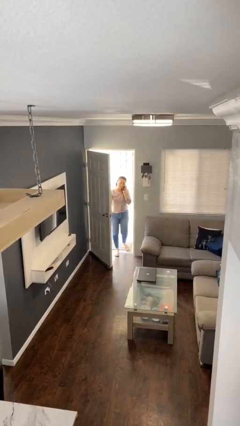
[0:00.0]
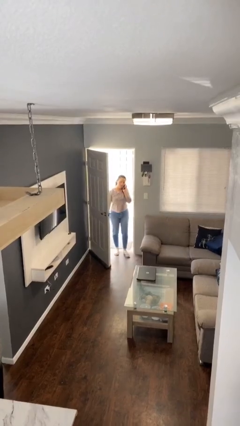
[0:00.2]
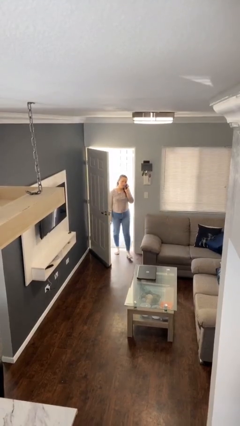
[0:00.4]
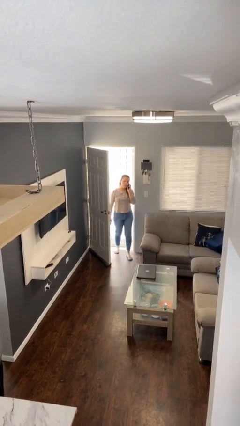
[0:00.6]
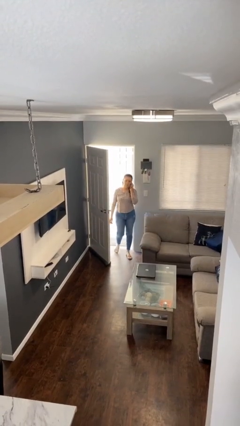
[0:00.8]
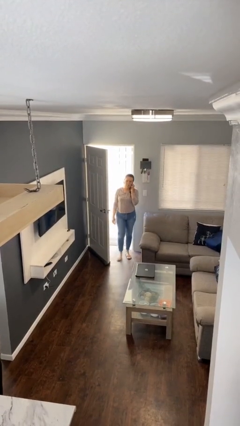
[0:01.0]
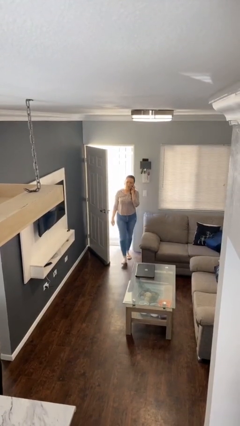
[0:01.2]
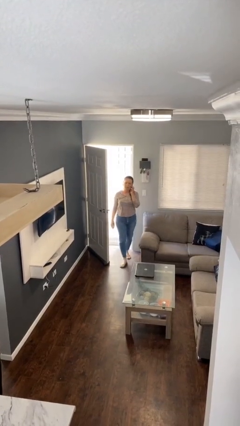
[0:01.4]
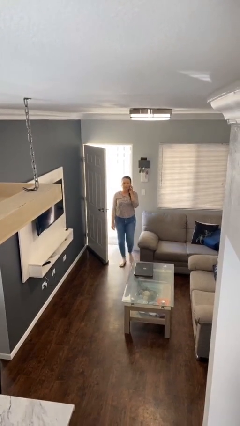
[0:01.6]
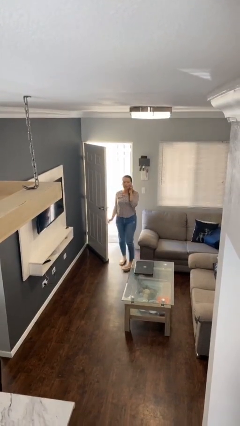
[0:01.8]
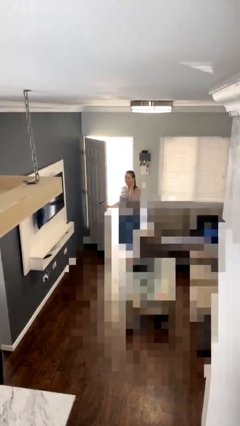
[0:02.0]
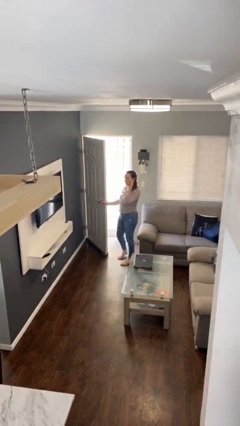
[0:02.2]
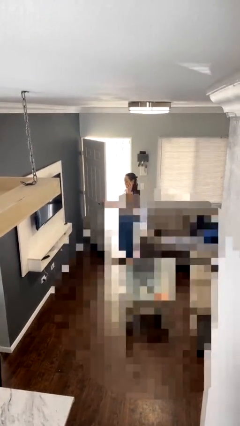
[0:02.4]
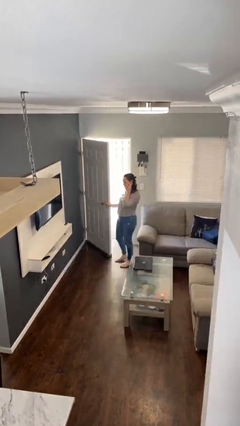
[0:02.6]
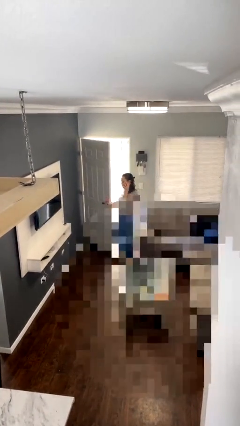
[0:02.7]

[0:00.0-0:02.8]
person enters scene through structure

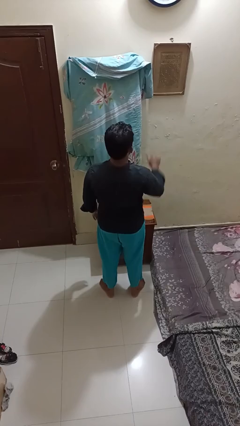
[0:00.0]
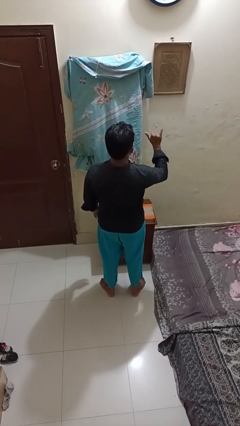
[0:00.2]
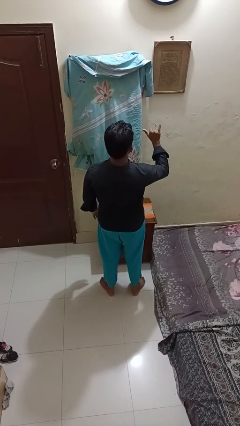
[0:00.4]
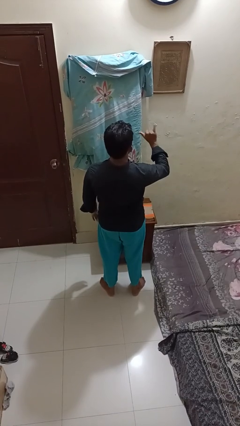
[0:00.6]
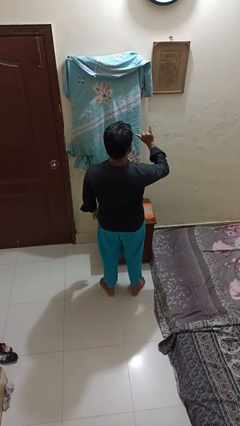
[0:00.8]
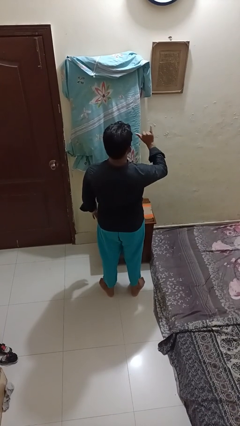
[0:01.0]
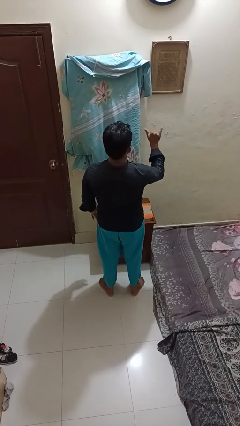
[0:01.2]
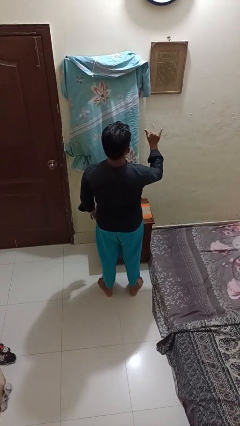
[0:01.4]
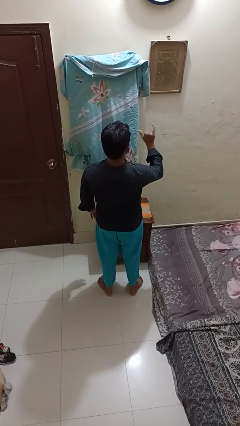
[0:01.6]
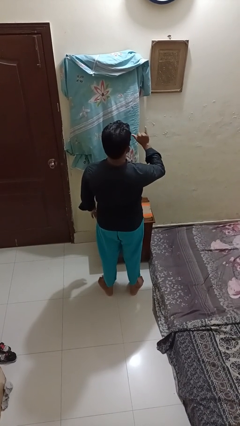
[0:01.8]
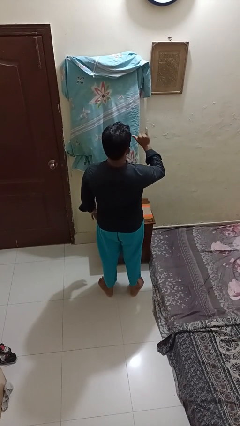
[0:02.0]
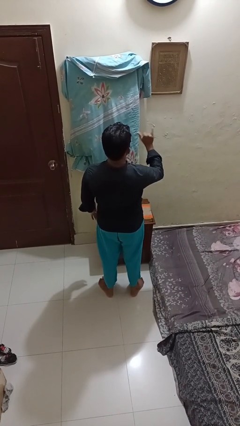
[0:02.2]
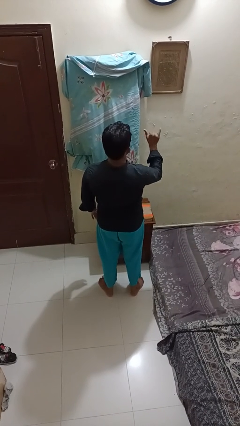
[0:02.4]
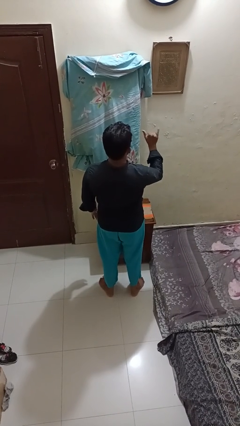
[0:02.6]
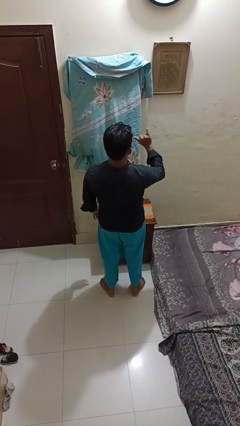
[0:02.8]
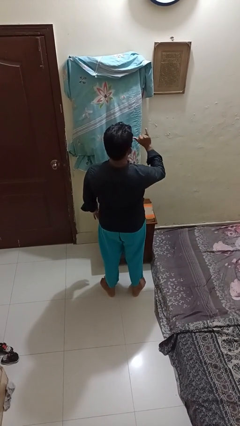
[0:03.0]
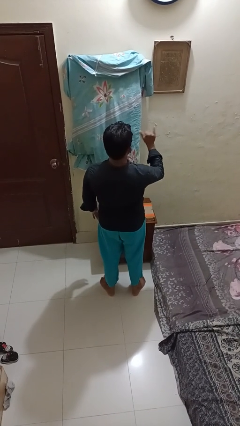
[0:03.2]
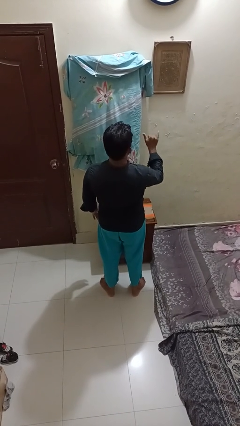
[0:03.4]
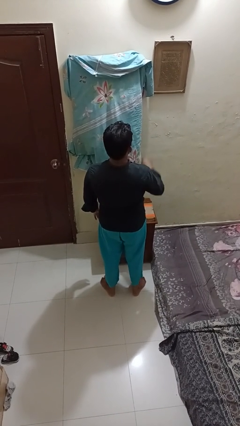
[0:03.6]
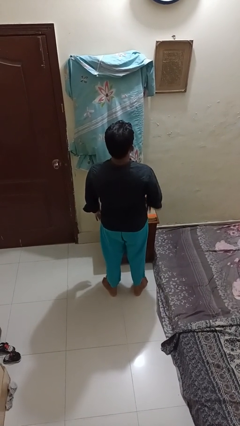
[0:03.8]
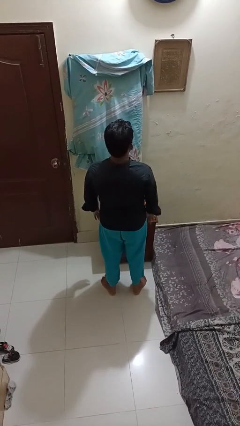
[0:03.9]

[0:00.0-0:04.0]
person gestures hang loose

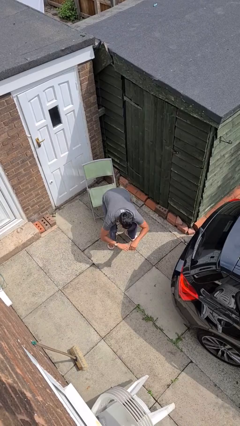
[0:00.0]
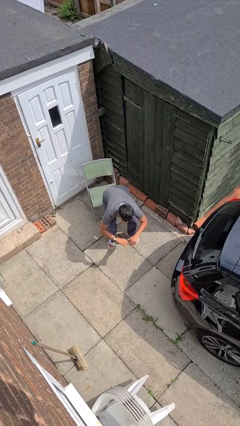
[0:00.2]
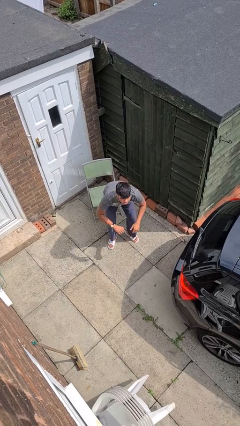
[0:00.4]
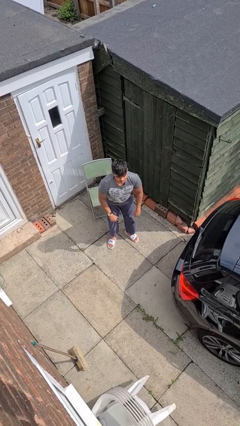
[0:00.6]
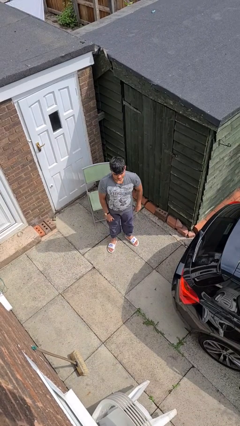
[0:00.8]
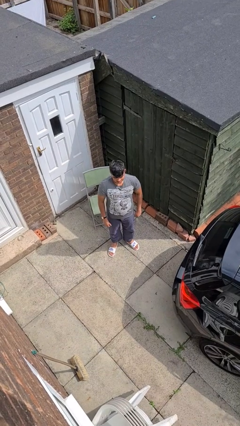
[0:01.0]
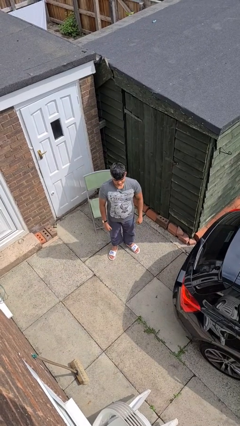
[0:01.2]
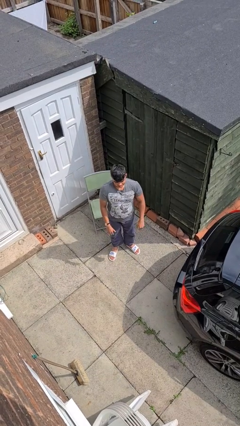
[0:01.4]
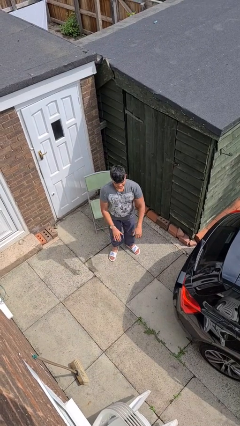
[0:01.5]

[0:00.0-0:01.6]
person stands up

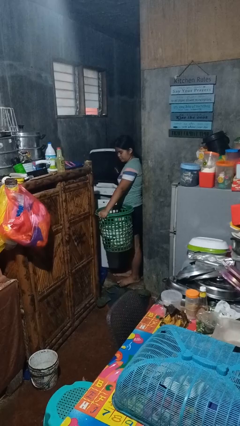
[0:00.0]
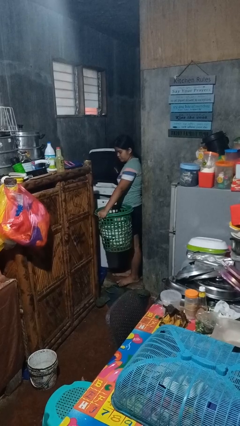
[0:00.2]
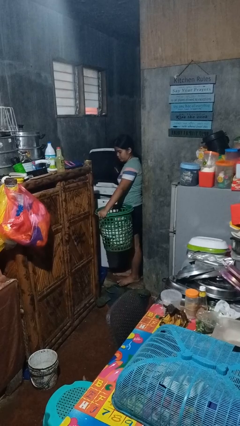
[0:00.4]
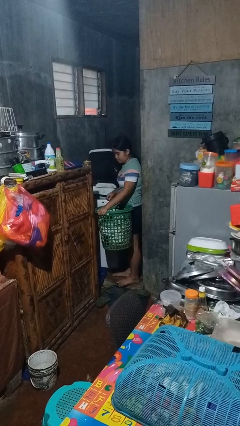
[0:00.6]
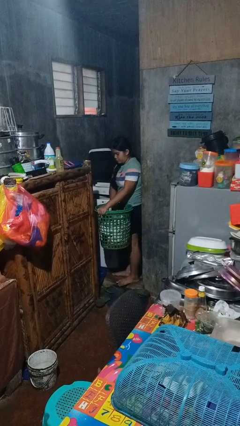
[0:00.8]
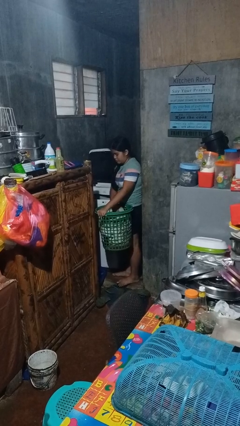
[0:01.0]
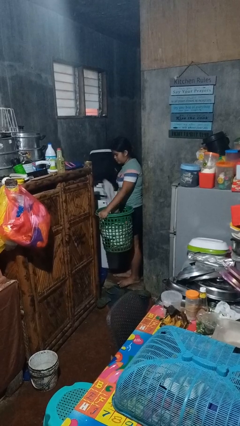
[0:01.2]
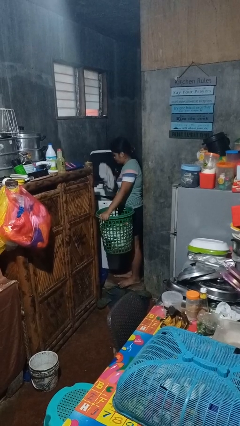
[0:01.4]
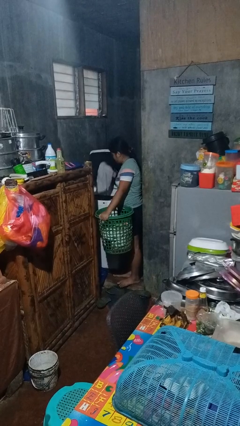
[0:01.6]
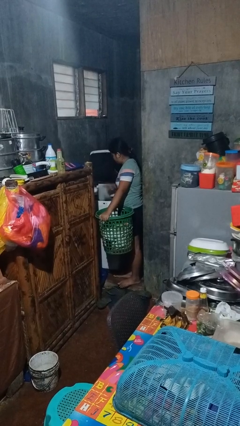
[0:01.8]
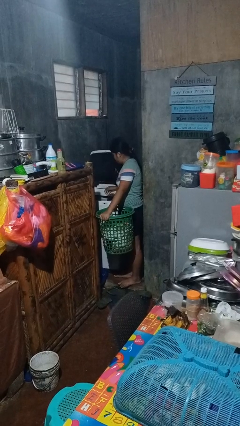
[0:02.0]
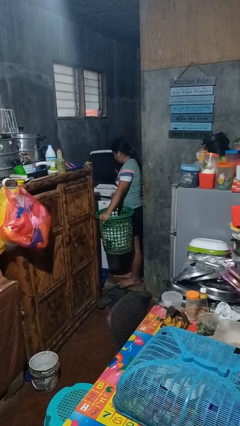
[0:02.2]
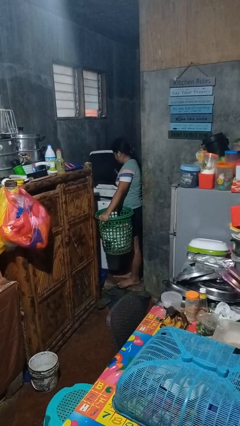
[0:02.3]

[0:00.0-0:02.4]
person loads clotheswasher

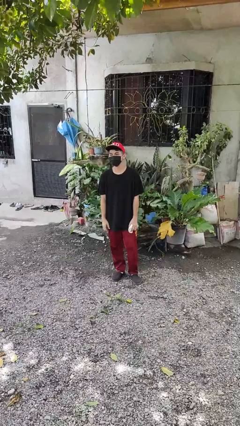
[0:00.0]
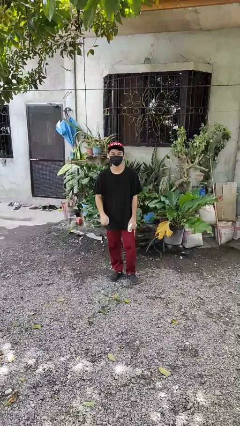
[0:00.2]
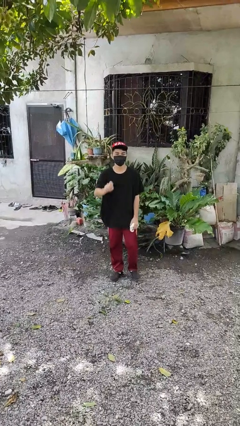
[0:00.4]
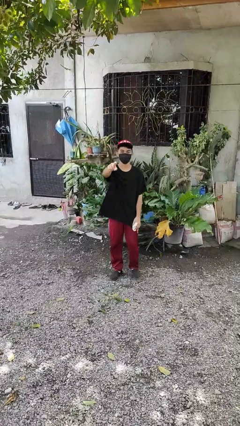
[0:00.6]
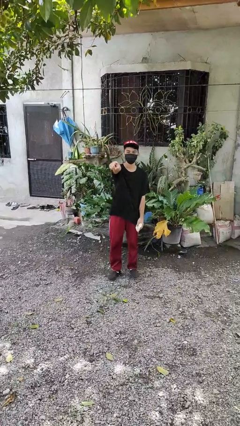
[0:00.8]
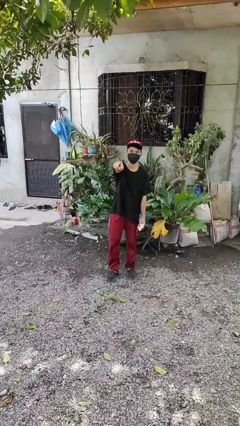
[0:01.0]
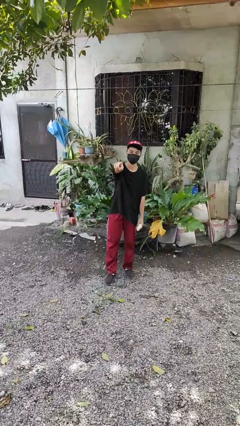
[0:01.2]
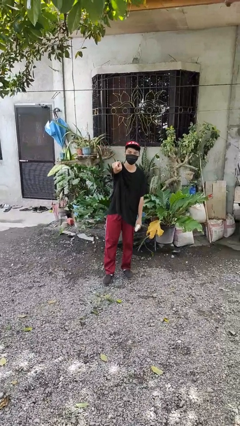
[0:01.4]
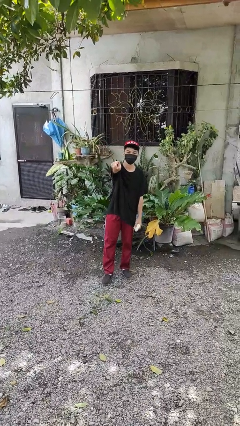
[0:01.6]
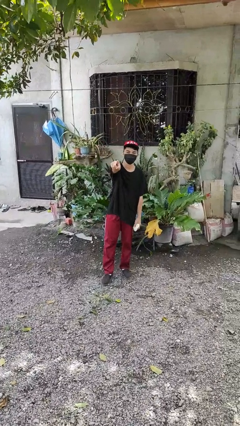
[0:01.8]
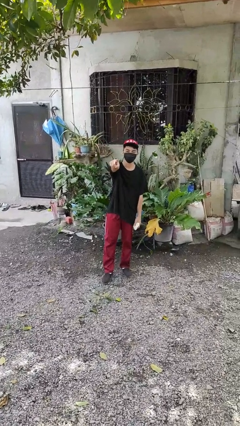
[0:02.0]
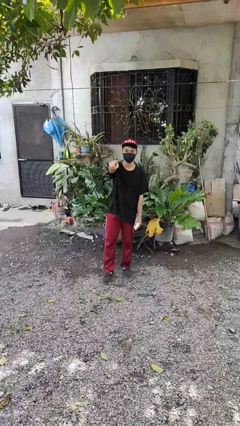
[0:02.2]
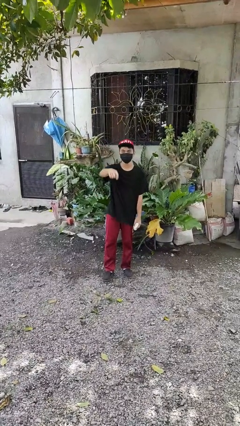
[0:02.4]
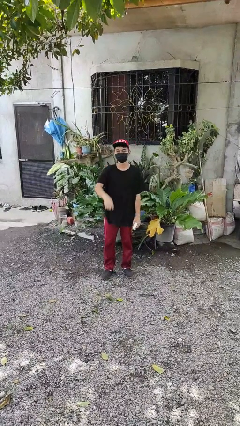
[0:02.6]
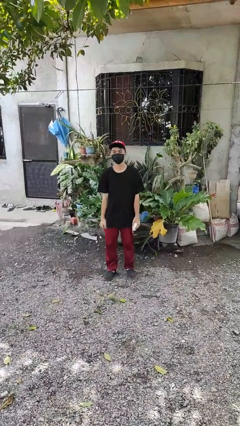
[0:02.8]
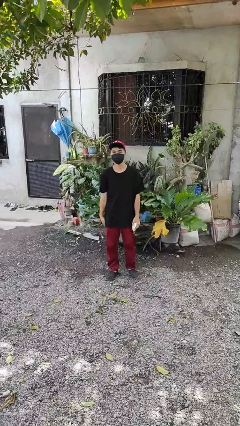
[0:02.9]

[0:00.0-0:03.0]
person points at person

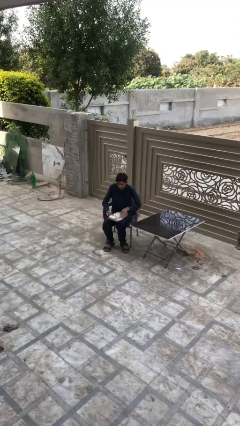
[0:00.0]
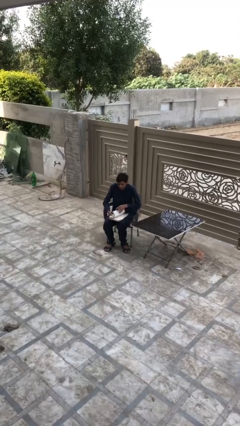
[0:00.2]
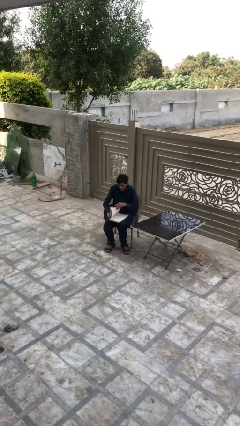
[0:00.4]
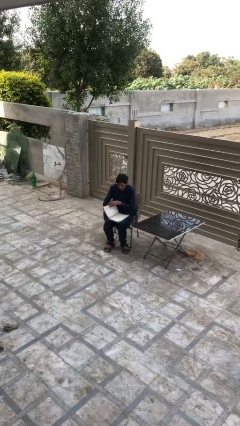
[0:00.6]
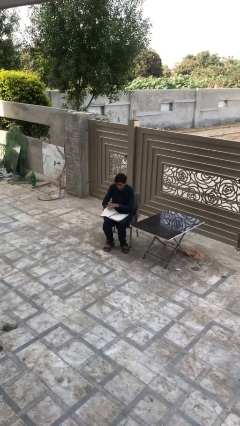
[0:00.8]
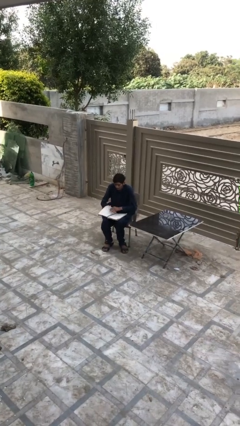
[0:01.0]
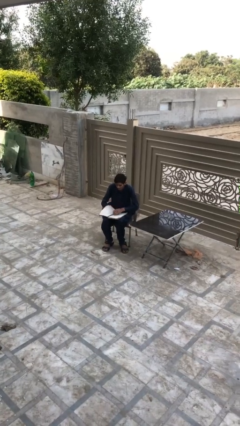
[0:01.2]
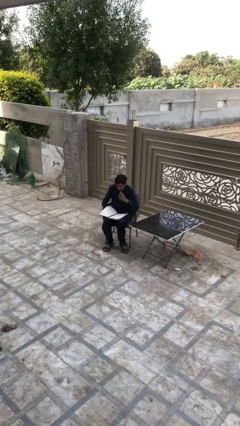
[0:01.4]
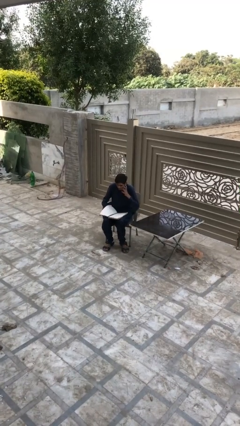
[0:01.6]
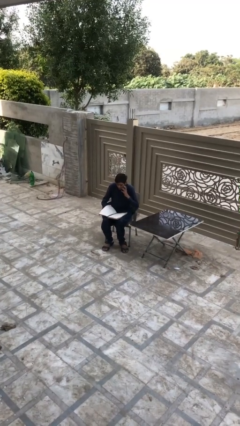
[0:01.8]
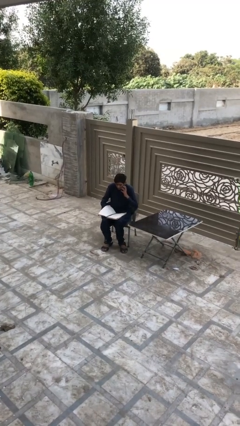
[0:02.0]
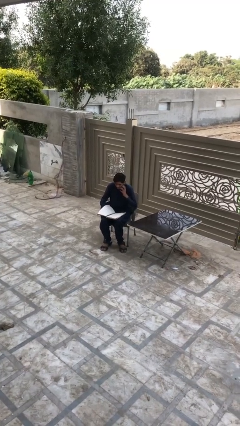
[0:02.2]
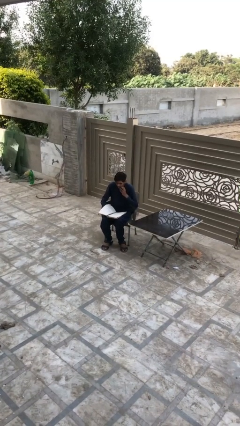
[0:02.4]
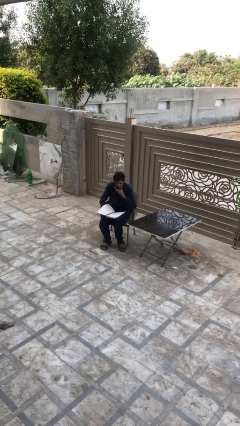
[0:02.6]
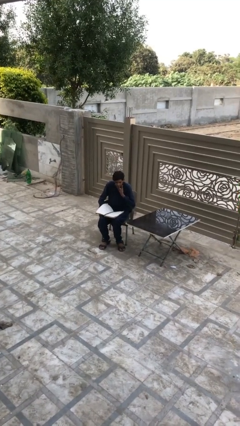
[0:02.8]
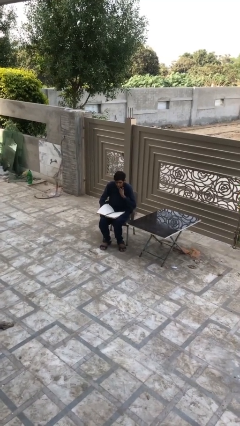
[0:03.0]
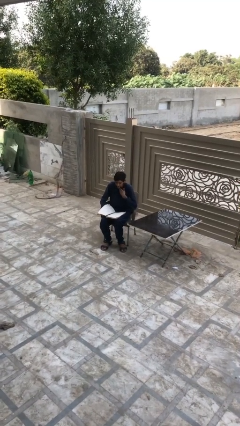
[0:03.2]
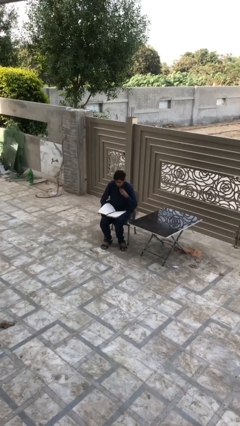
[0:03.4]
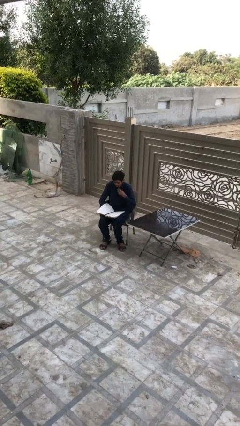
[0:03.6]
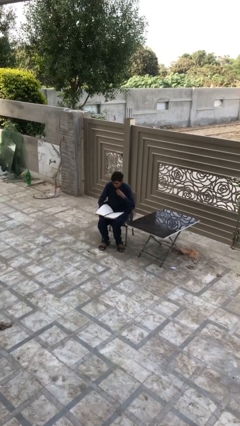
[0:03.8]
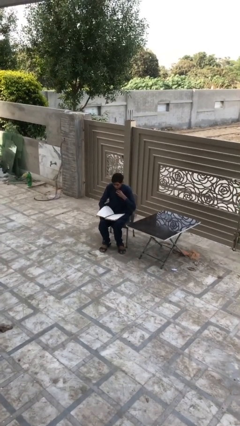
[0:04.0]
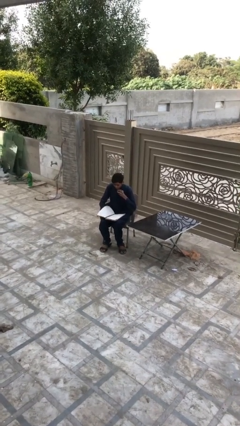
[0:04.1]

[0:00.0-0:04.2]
person reads document
